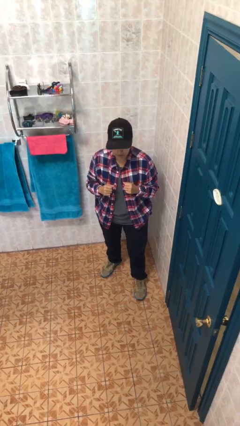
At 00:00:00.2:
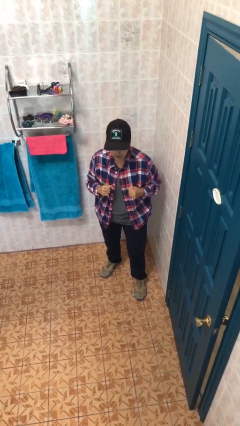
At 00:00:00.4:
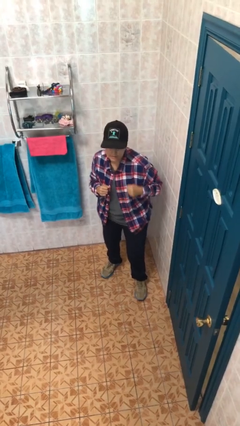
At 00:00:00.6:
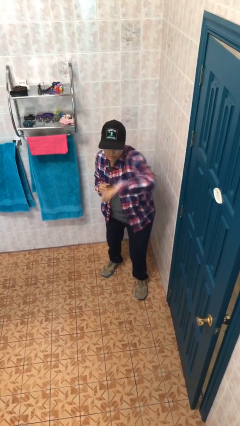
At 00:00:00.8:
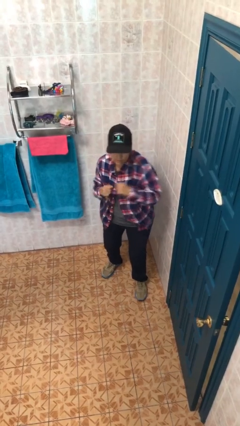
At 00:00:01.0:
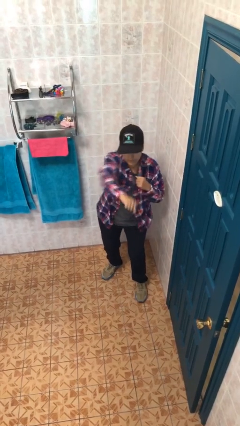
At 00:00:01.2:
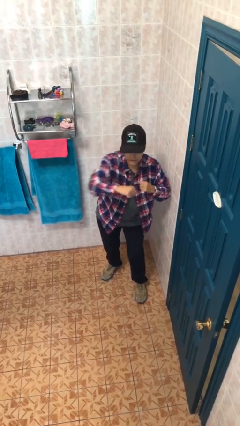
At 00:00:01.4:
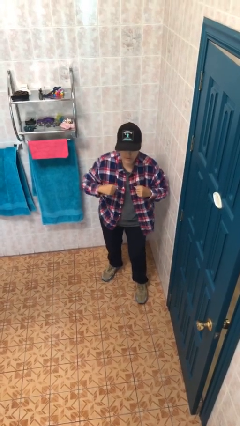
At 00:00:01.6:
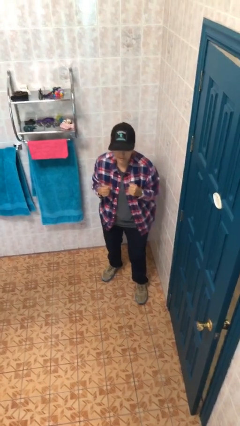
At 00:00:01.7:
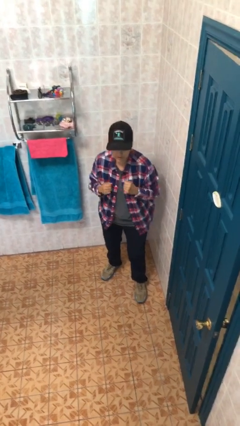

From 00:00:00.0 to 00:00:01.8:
person punches

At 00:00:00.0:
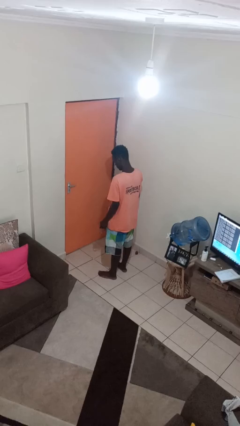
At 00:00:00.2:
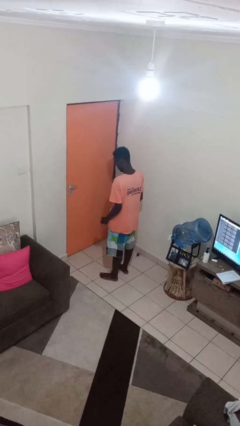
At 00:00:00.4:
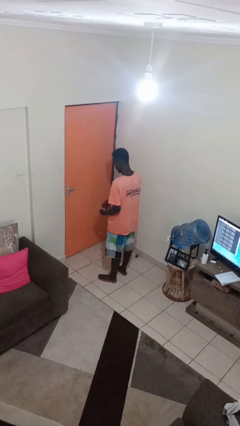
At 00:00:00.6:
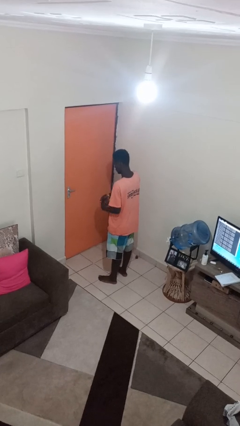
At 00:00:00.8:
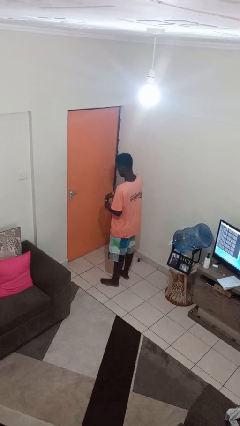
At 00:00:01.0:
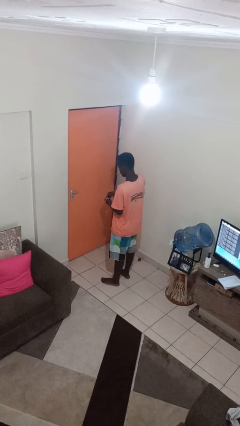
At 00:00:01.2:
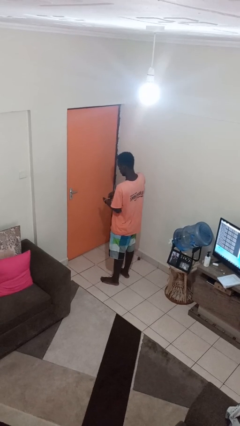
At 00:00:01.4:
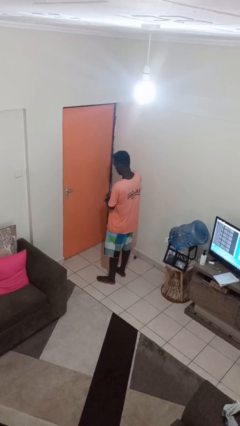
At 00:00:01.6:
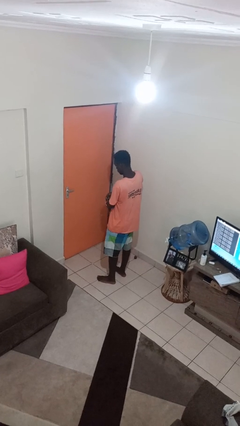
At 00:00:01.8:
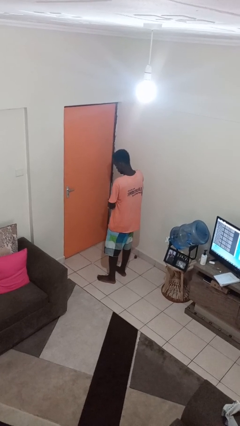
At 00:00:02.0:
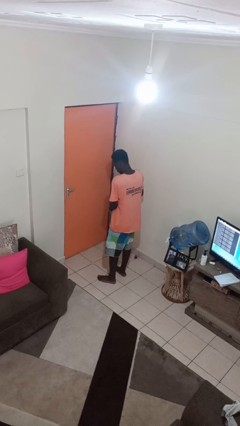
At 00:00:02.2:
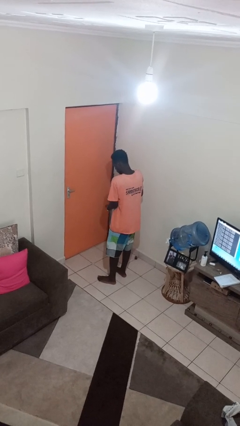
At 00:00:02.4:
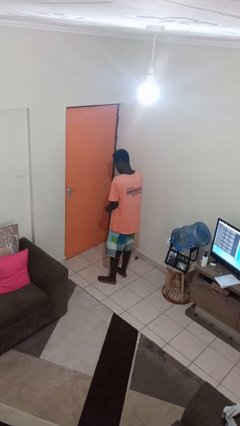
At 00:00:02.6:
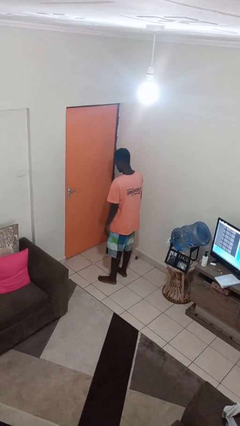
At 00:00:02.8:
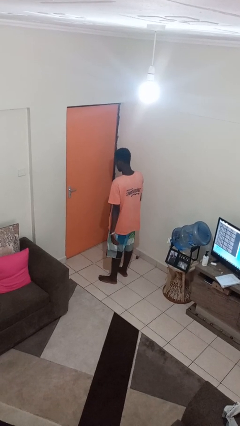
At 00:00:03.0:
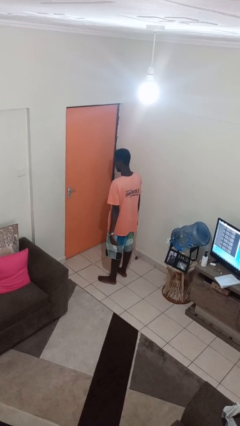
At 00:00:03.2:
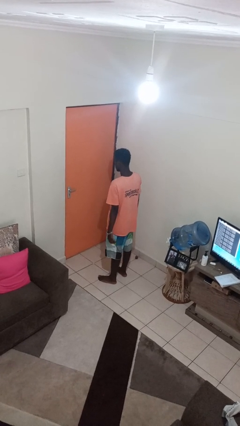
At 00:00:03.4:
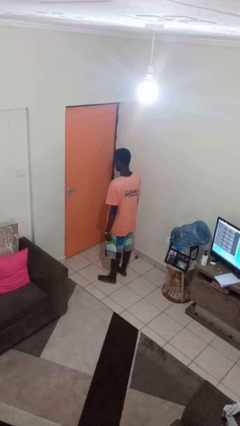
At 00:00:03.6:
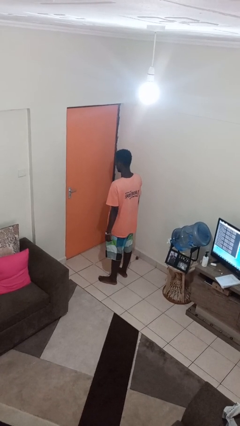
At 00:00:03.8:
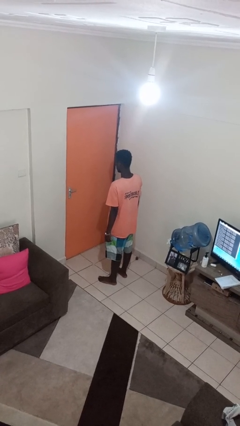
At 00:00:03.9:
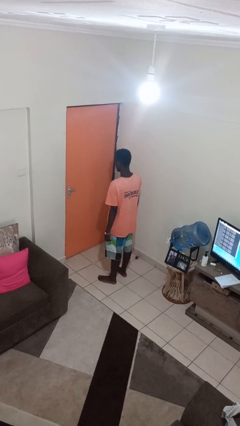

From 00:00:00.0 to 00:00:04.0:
person puts on wristwatch

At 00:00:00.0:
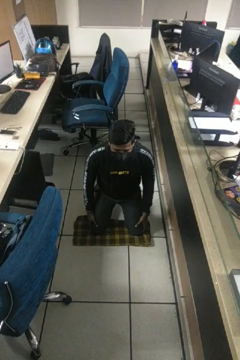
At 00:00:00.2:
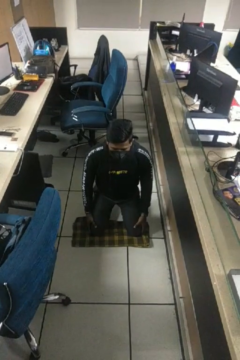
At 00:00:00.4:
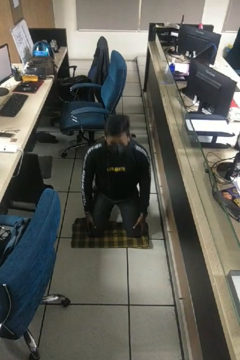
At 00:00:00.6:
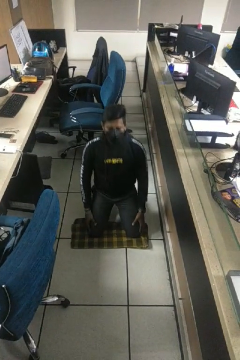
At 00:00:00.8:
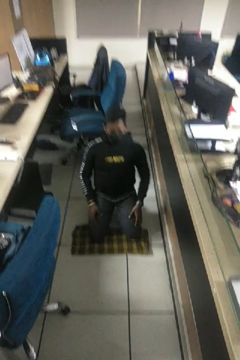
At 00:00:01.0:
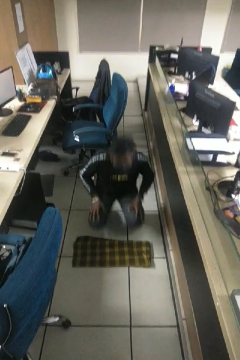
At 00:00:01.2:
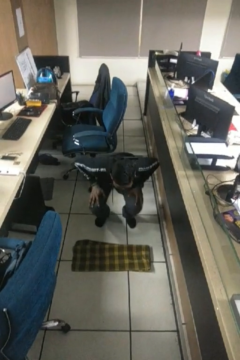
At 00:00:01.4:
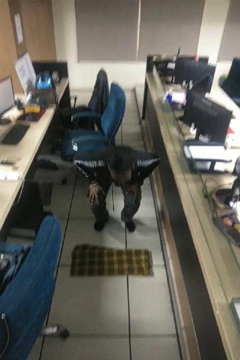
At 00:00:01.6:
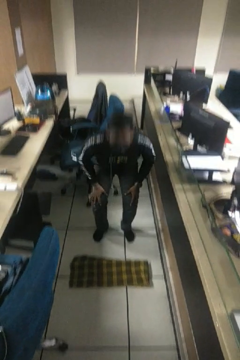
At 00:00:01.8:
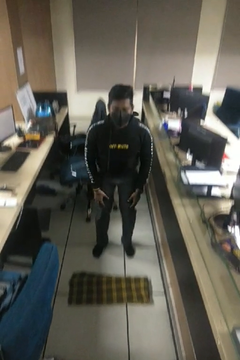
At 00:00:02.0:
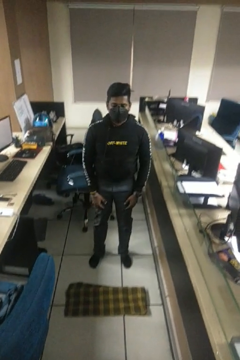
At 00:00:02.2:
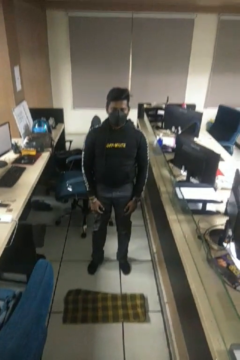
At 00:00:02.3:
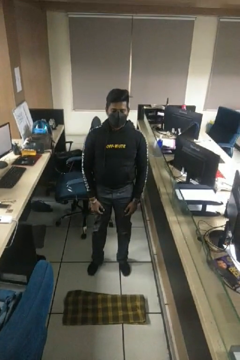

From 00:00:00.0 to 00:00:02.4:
person stands up from floor

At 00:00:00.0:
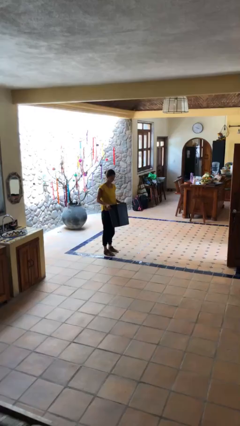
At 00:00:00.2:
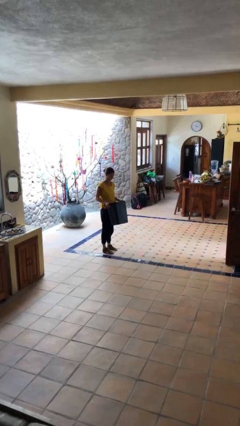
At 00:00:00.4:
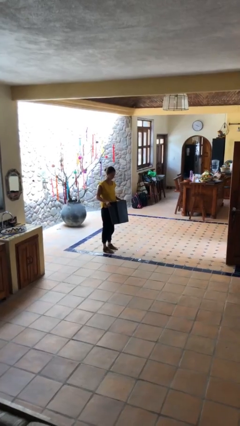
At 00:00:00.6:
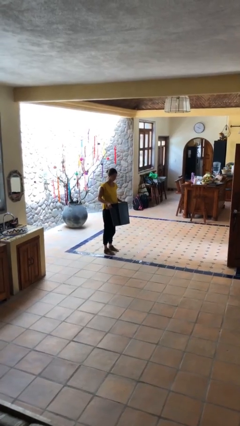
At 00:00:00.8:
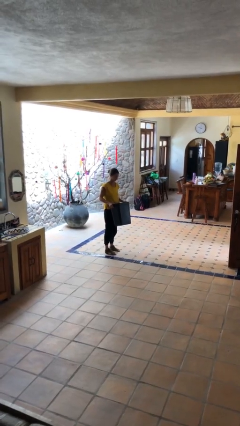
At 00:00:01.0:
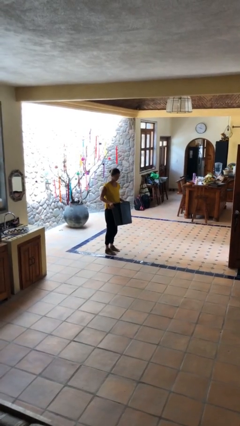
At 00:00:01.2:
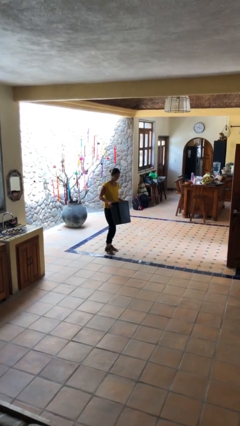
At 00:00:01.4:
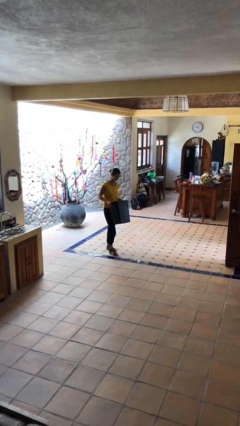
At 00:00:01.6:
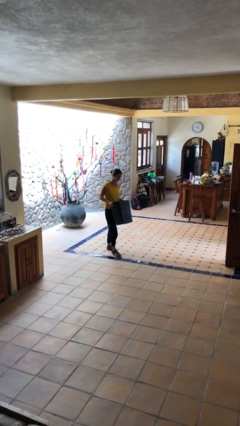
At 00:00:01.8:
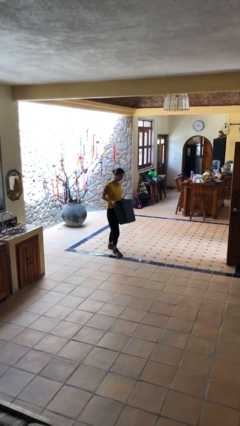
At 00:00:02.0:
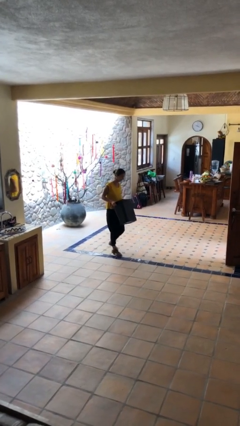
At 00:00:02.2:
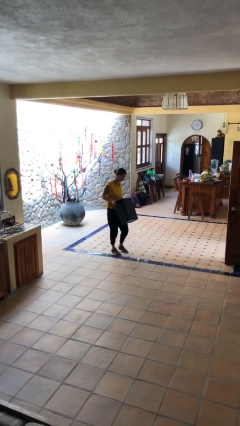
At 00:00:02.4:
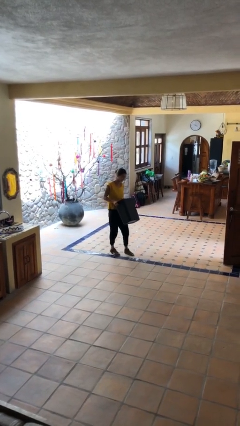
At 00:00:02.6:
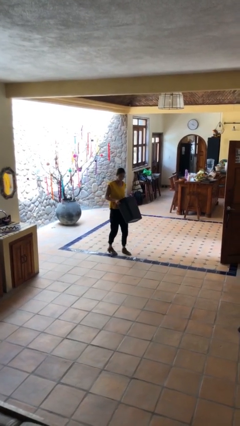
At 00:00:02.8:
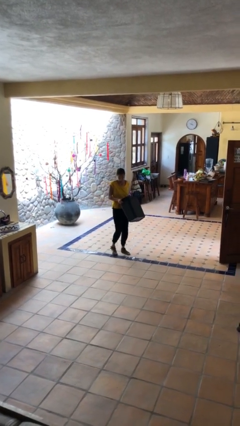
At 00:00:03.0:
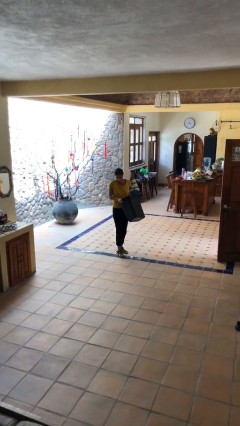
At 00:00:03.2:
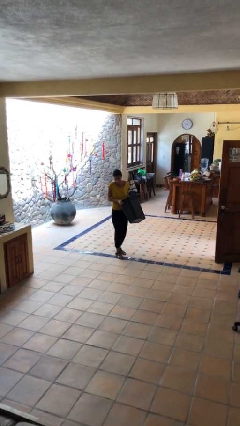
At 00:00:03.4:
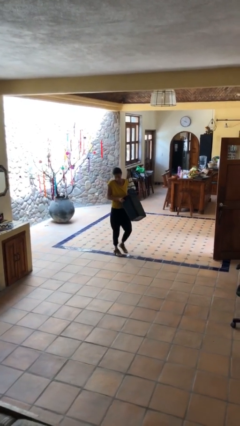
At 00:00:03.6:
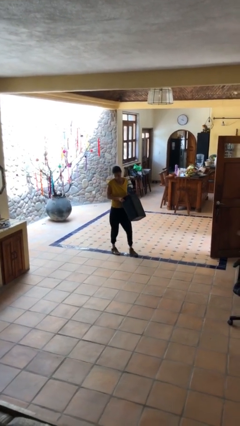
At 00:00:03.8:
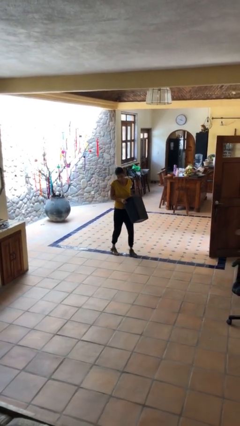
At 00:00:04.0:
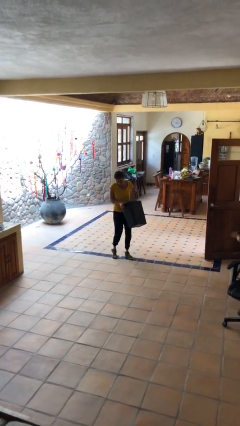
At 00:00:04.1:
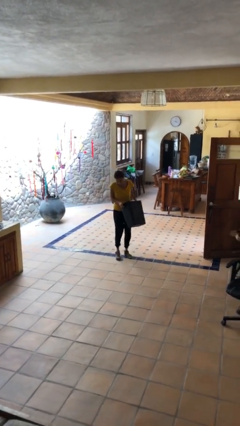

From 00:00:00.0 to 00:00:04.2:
person carries heavy object

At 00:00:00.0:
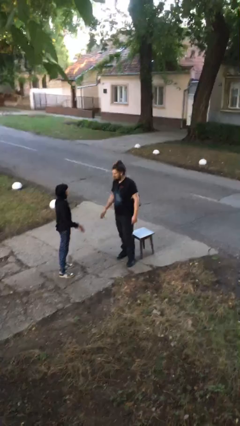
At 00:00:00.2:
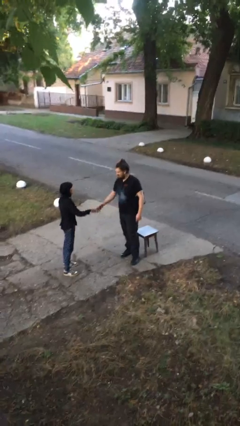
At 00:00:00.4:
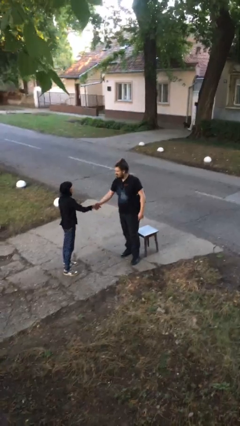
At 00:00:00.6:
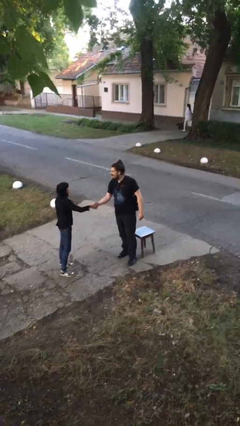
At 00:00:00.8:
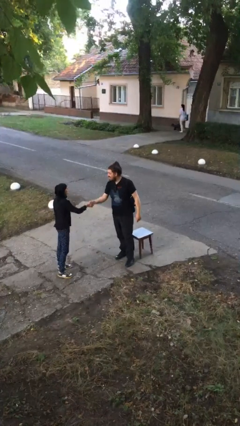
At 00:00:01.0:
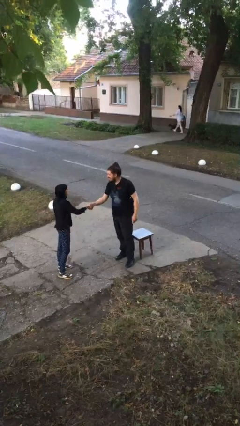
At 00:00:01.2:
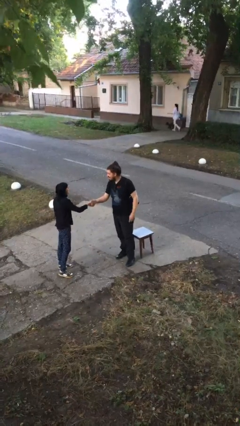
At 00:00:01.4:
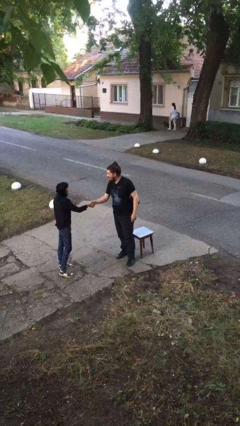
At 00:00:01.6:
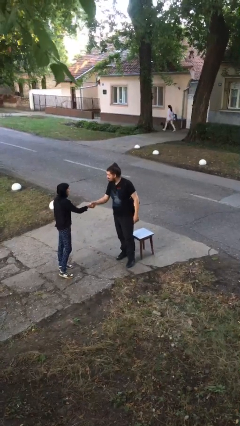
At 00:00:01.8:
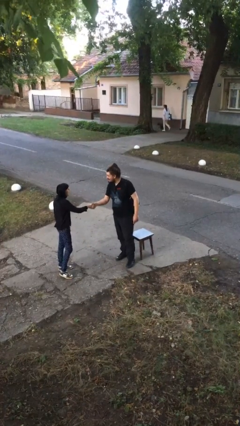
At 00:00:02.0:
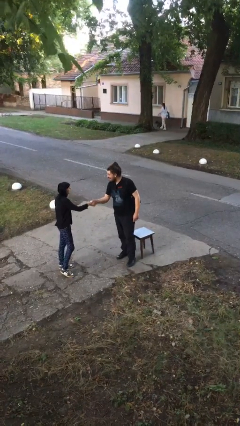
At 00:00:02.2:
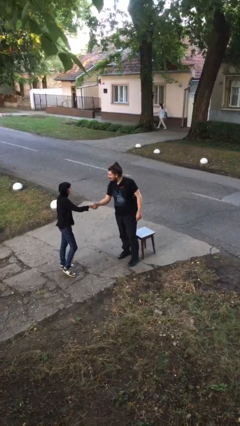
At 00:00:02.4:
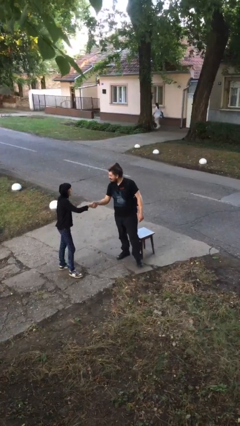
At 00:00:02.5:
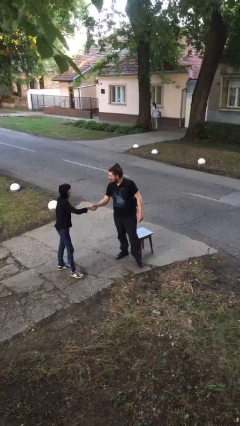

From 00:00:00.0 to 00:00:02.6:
person shakes hand

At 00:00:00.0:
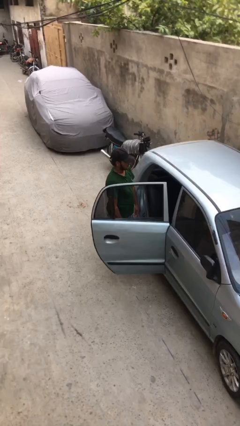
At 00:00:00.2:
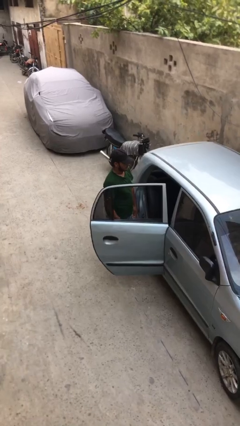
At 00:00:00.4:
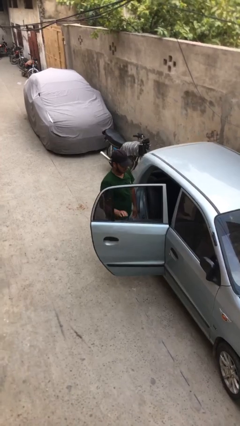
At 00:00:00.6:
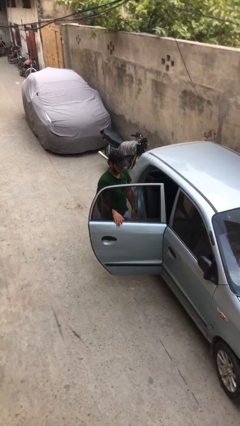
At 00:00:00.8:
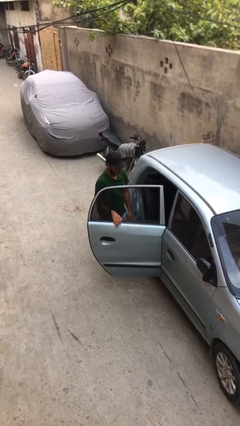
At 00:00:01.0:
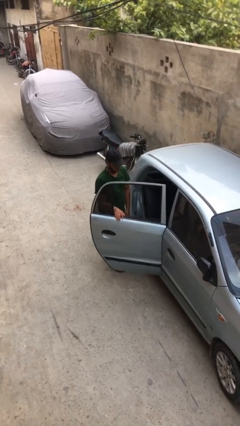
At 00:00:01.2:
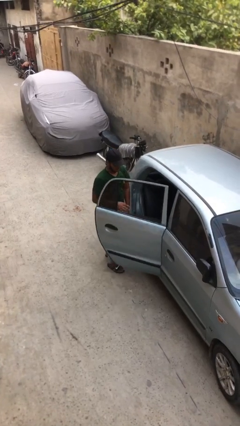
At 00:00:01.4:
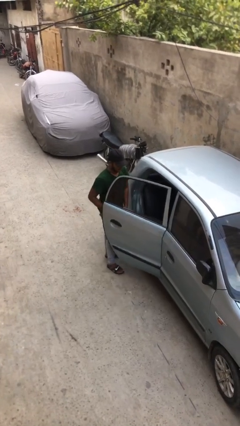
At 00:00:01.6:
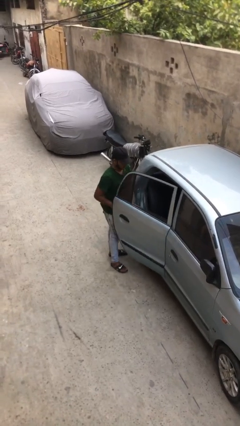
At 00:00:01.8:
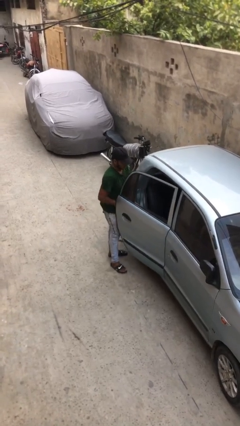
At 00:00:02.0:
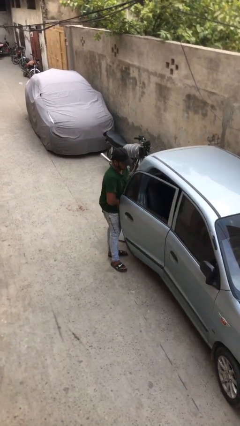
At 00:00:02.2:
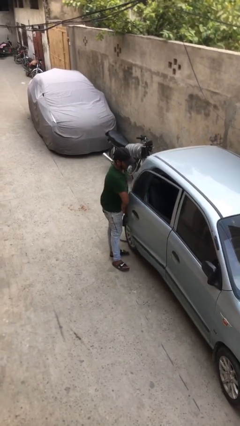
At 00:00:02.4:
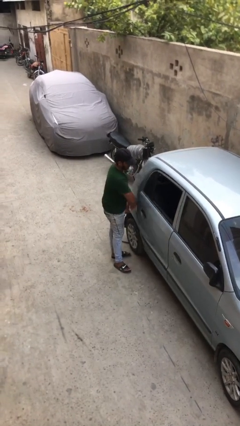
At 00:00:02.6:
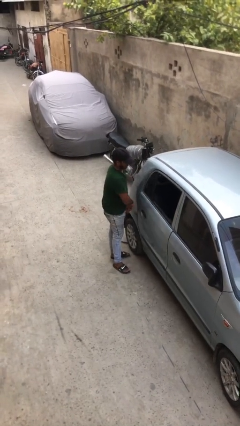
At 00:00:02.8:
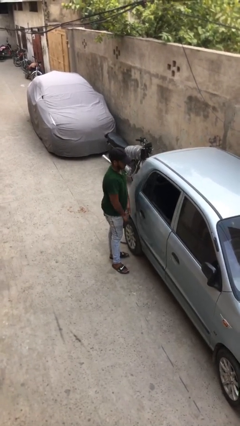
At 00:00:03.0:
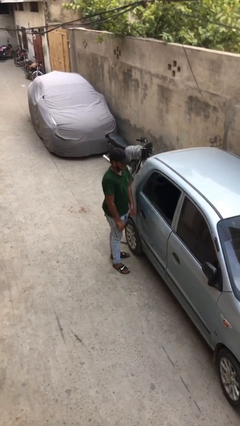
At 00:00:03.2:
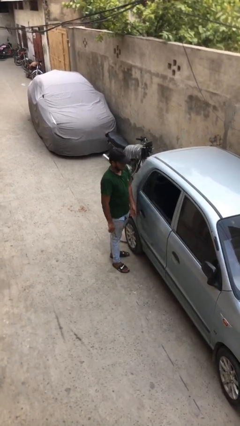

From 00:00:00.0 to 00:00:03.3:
person closes car door
